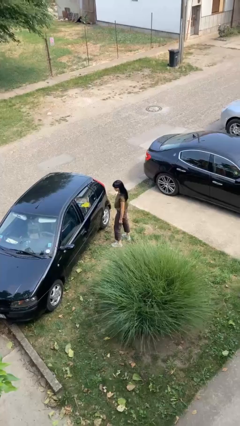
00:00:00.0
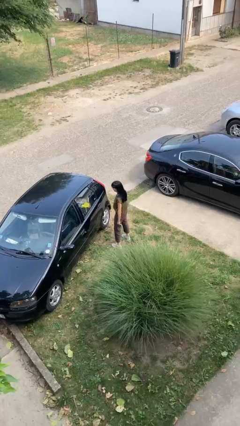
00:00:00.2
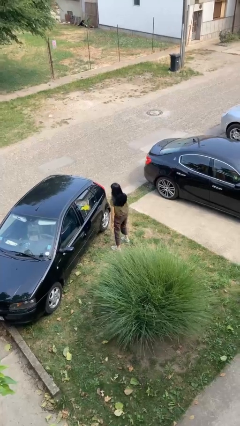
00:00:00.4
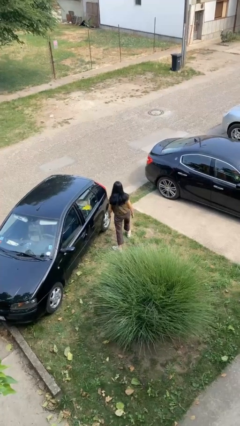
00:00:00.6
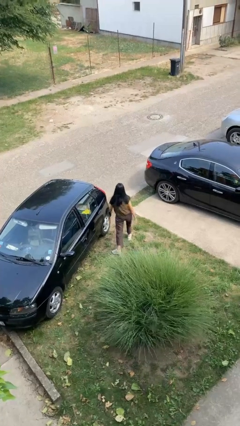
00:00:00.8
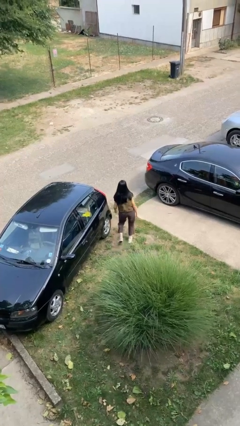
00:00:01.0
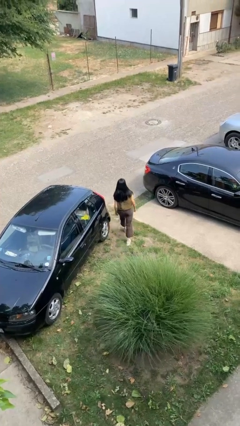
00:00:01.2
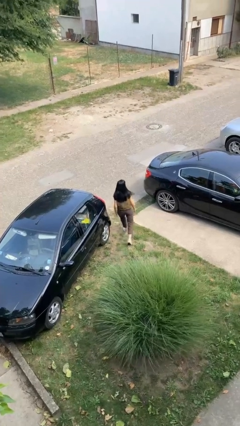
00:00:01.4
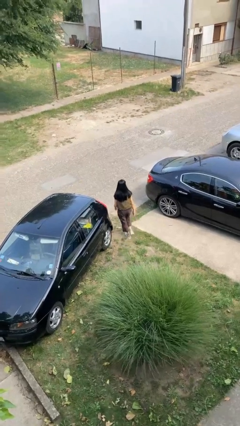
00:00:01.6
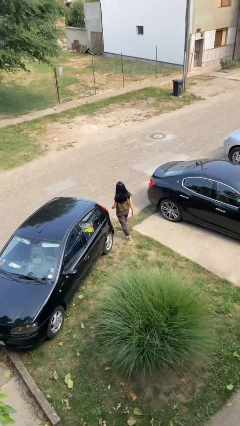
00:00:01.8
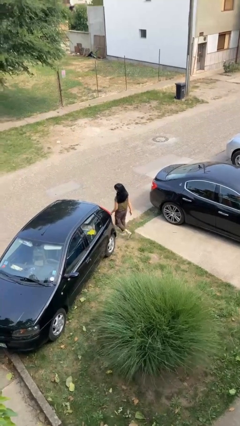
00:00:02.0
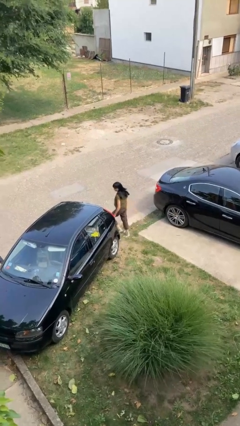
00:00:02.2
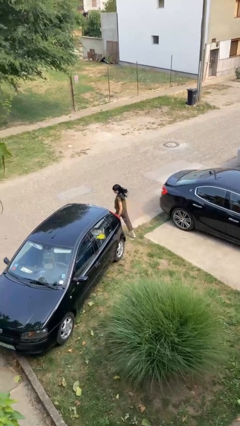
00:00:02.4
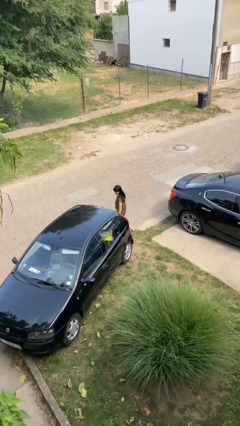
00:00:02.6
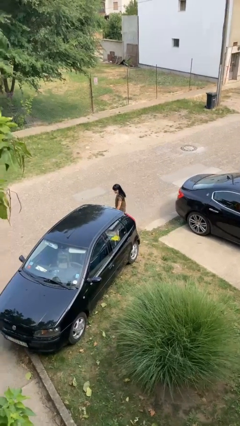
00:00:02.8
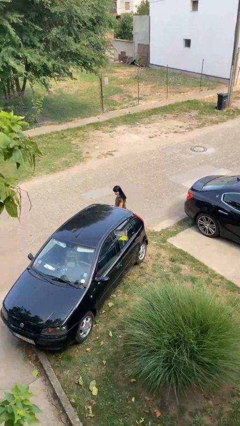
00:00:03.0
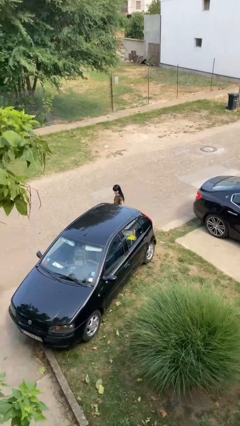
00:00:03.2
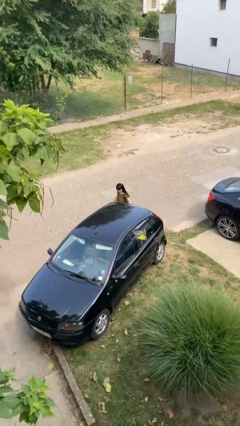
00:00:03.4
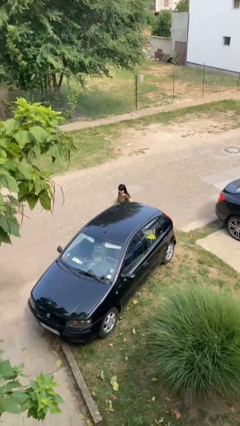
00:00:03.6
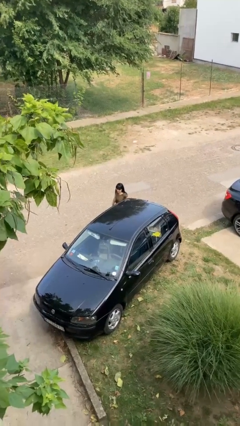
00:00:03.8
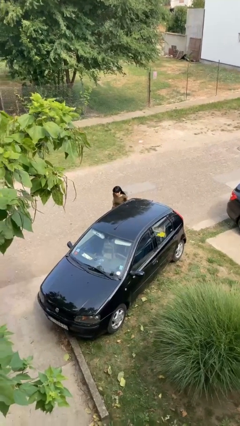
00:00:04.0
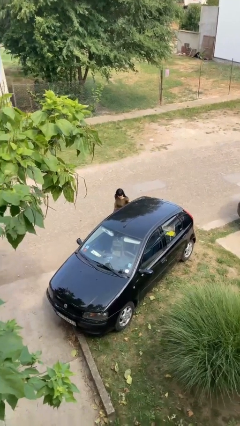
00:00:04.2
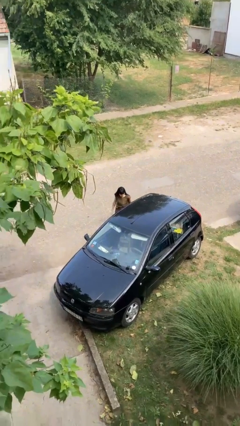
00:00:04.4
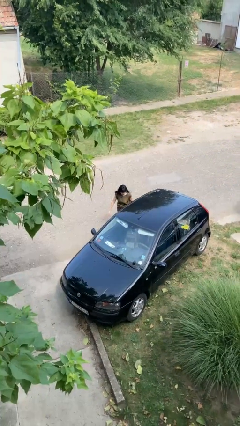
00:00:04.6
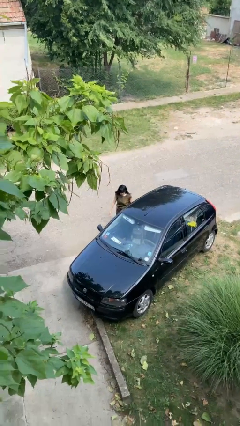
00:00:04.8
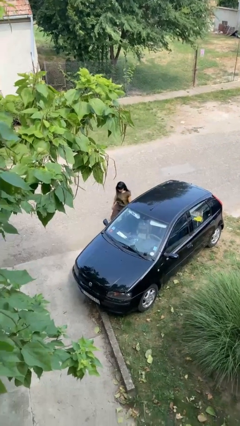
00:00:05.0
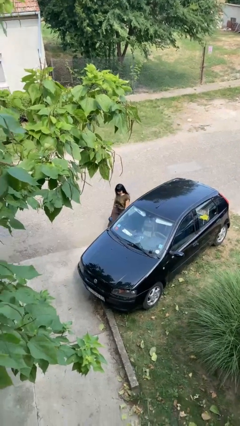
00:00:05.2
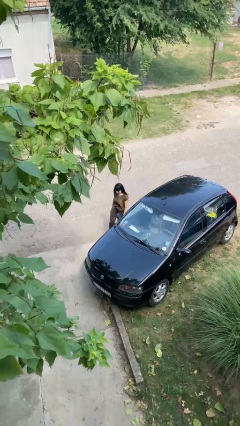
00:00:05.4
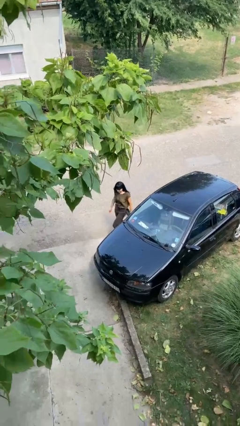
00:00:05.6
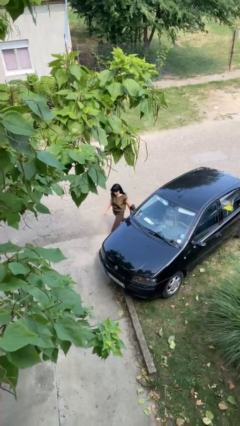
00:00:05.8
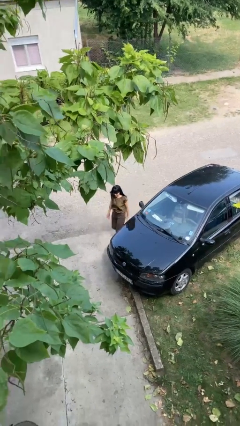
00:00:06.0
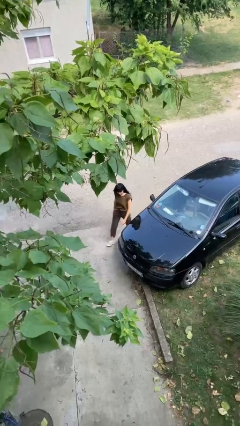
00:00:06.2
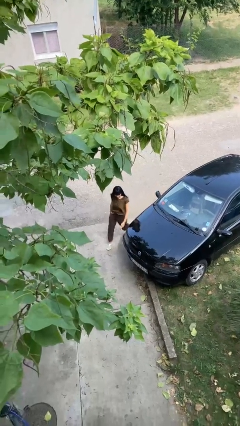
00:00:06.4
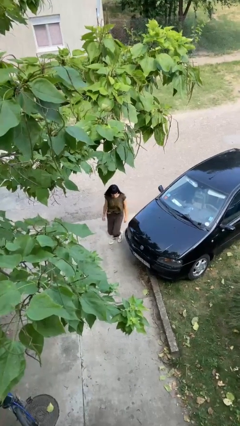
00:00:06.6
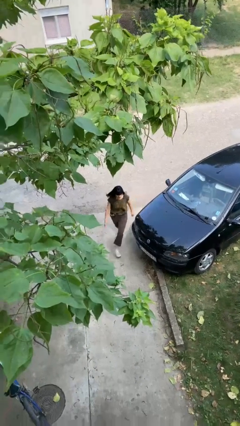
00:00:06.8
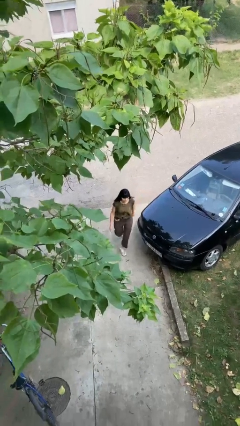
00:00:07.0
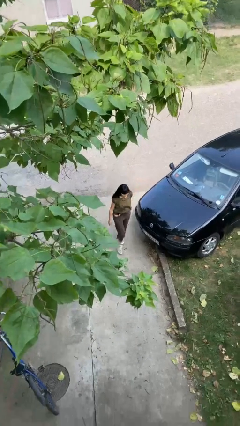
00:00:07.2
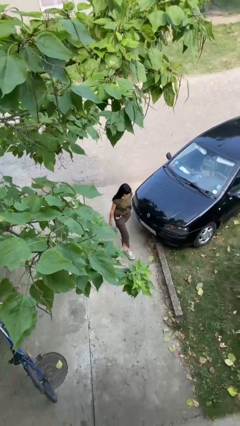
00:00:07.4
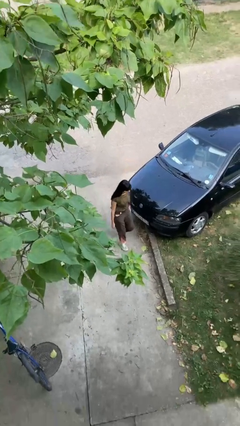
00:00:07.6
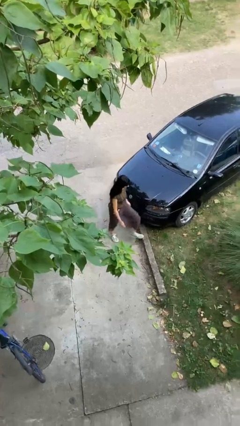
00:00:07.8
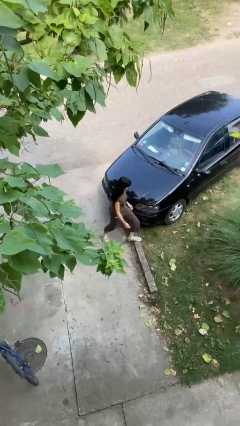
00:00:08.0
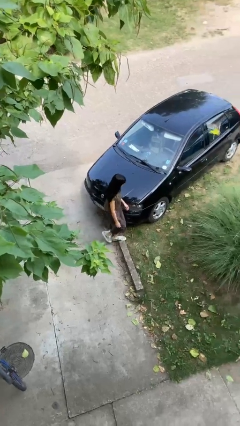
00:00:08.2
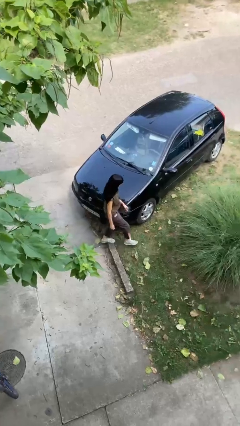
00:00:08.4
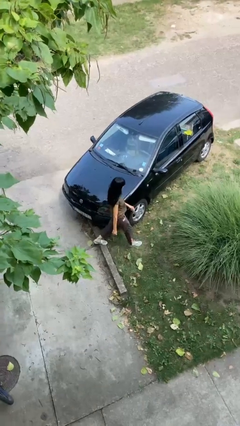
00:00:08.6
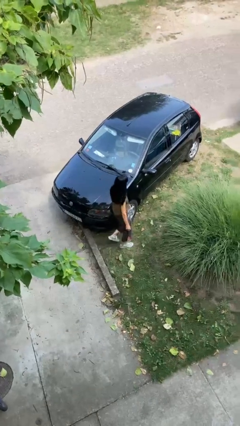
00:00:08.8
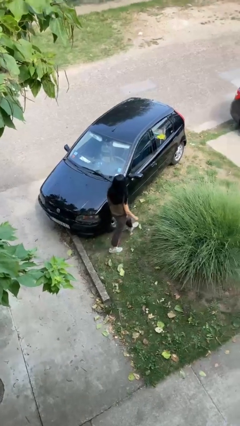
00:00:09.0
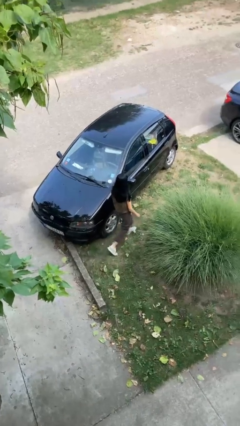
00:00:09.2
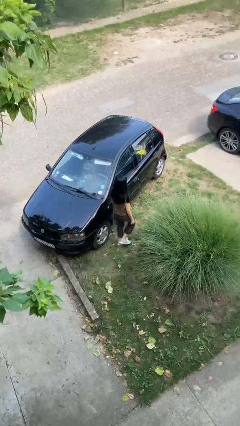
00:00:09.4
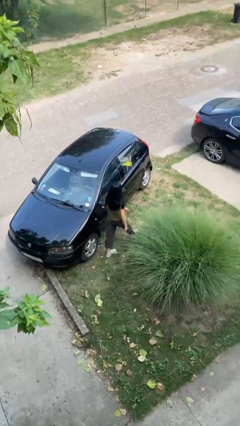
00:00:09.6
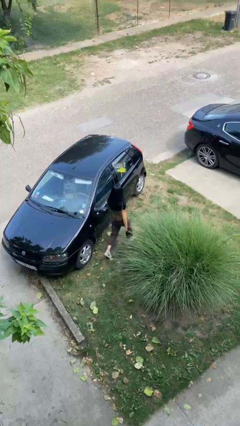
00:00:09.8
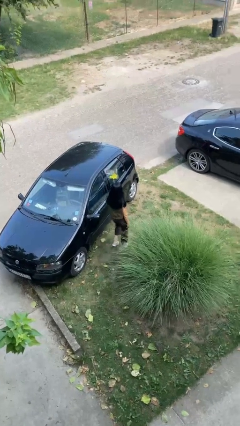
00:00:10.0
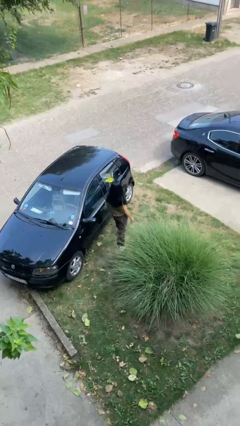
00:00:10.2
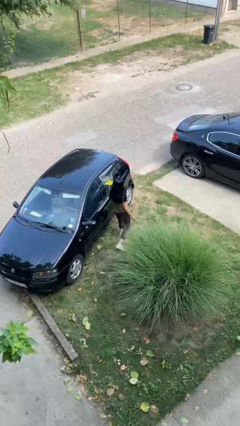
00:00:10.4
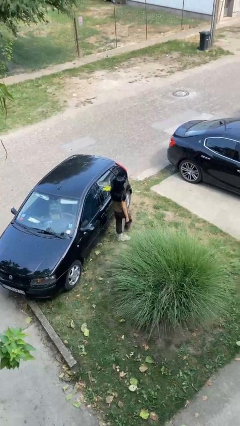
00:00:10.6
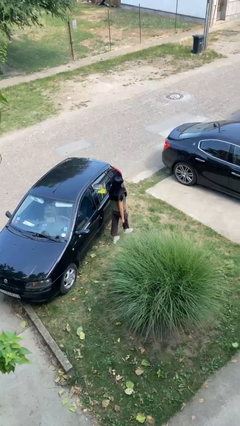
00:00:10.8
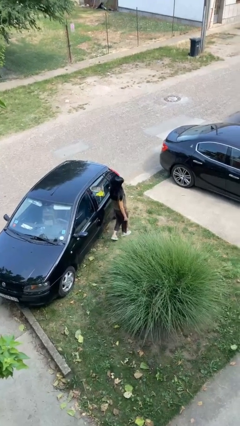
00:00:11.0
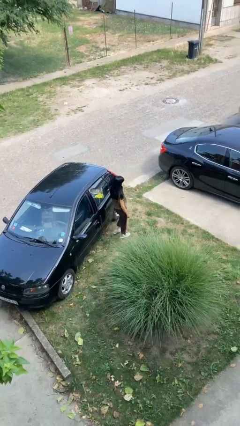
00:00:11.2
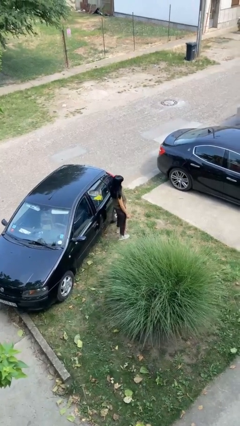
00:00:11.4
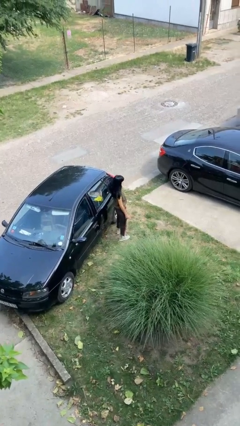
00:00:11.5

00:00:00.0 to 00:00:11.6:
person walks around car

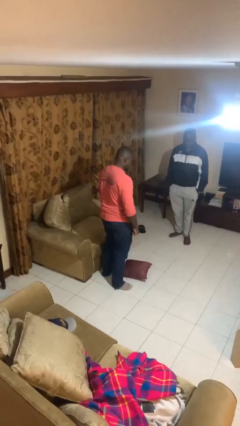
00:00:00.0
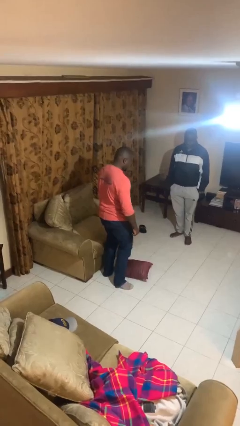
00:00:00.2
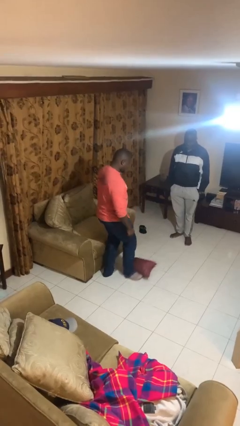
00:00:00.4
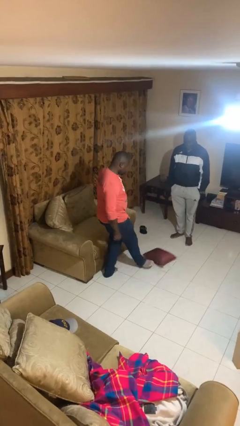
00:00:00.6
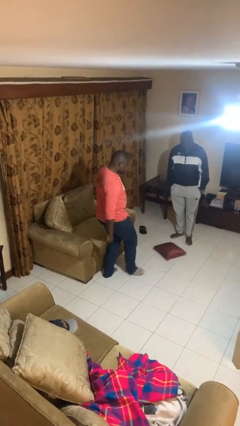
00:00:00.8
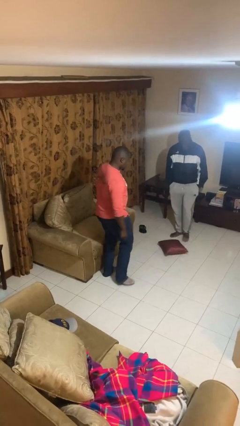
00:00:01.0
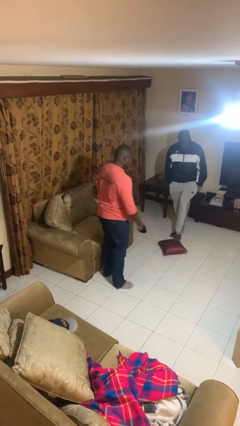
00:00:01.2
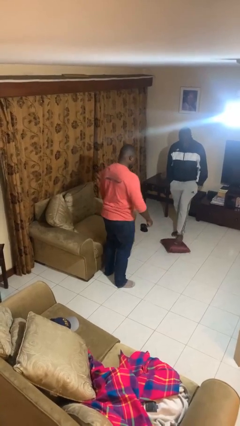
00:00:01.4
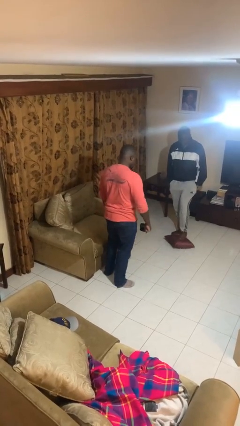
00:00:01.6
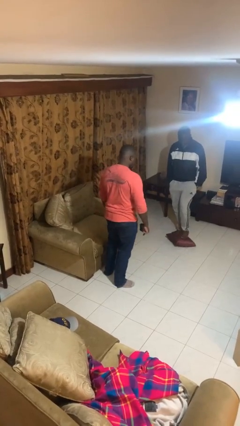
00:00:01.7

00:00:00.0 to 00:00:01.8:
person kicks object to person

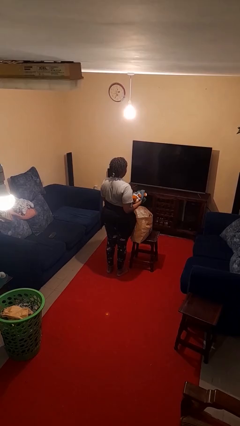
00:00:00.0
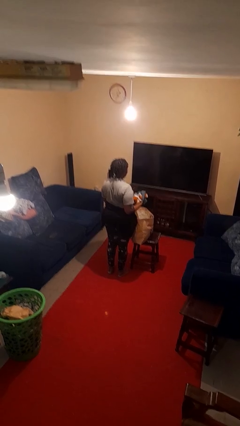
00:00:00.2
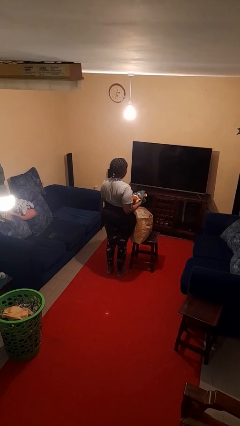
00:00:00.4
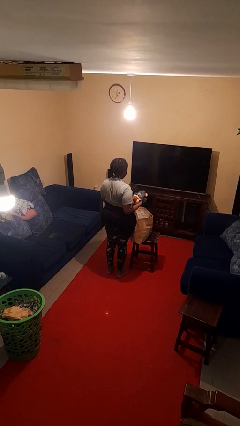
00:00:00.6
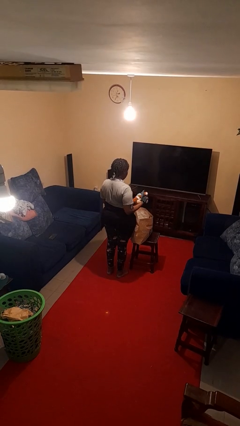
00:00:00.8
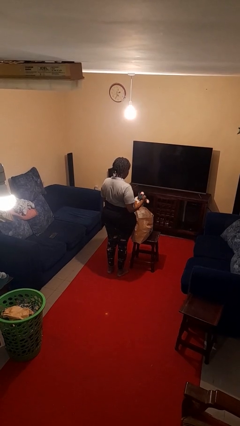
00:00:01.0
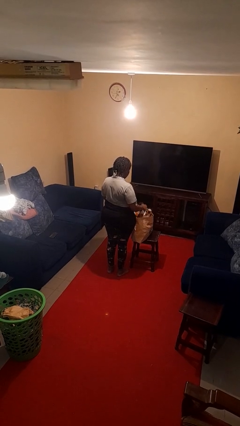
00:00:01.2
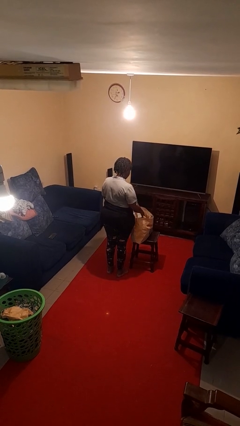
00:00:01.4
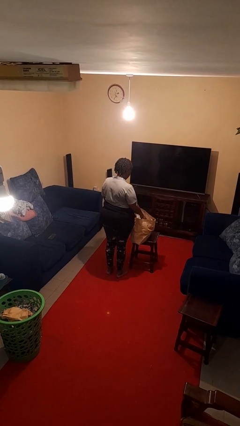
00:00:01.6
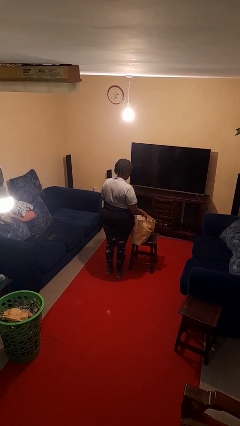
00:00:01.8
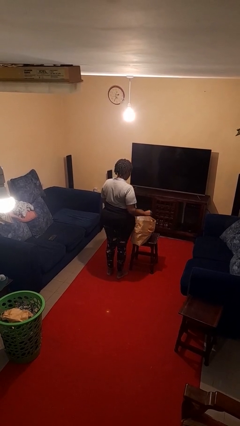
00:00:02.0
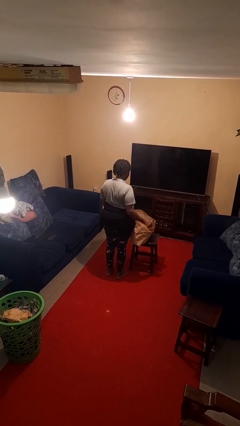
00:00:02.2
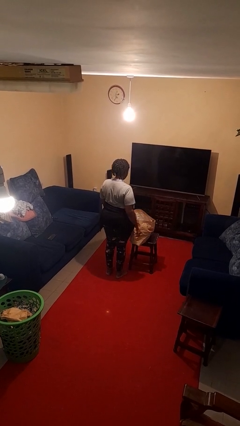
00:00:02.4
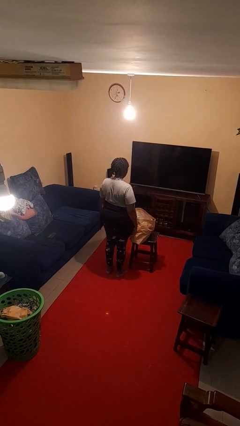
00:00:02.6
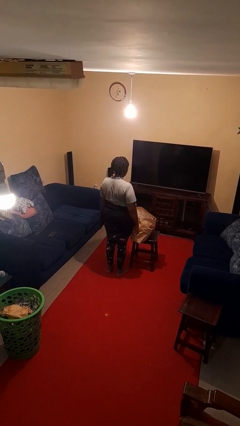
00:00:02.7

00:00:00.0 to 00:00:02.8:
person puts object into bag

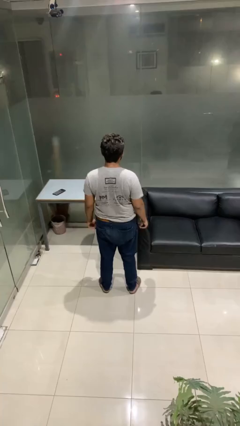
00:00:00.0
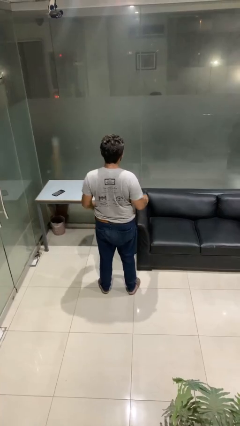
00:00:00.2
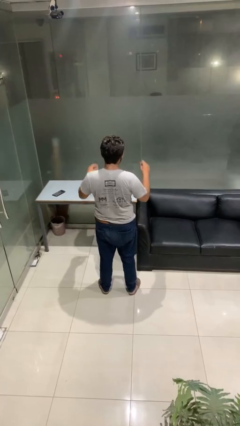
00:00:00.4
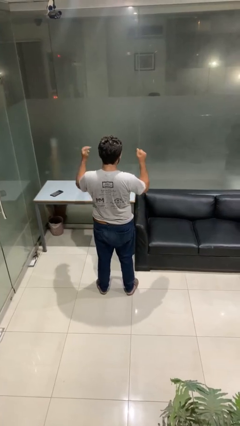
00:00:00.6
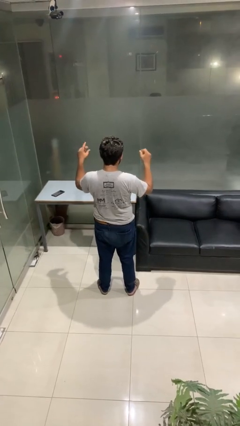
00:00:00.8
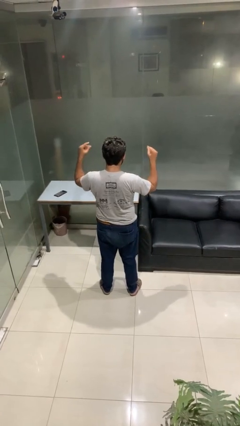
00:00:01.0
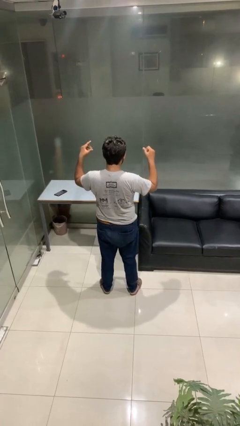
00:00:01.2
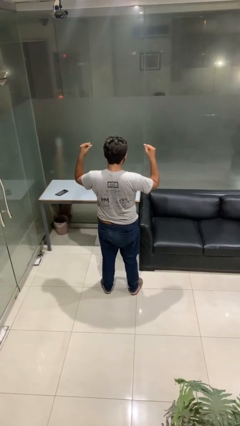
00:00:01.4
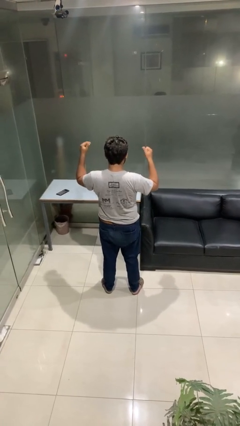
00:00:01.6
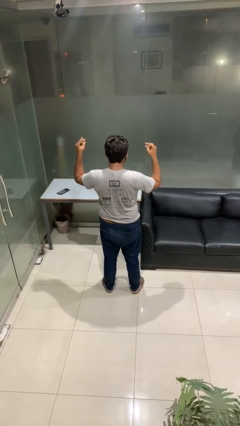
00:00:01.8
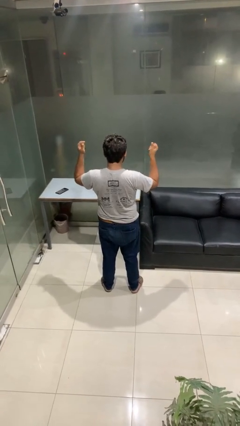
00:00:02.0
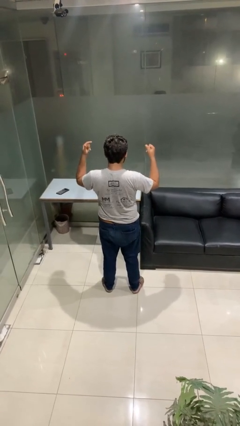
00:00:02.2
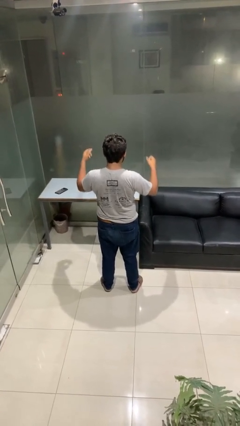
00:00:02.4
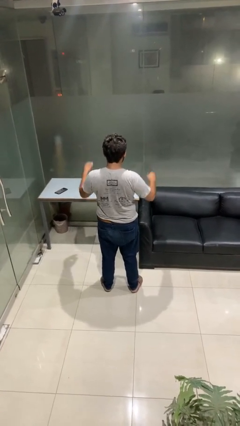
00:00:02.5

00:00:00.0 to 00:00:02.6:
person snaps fingers
